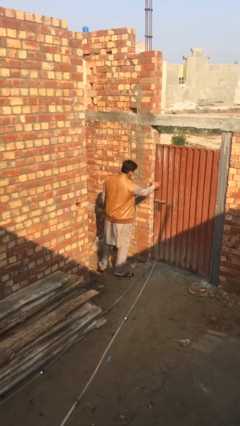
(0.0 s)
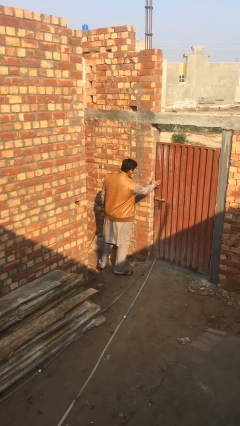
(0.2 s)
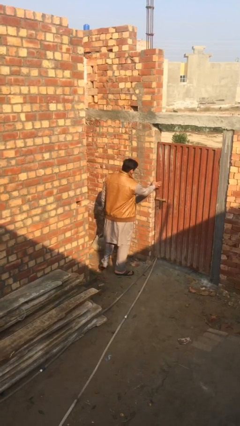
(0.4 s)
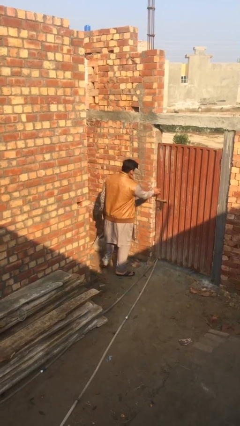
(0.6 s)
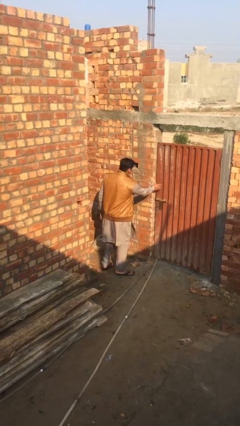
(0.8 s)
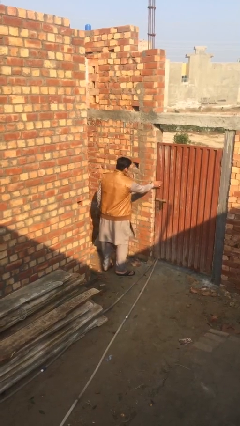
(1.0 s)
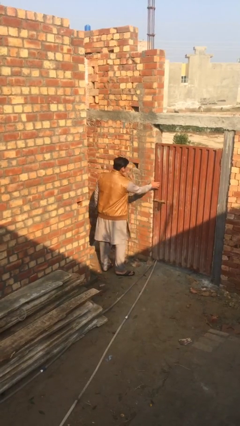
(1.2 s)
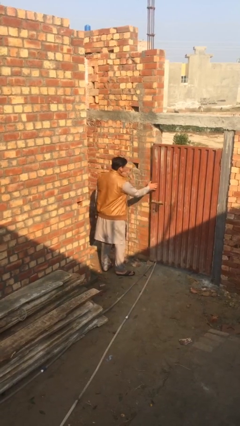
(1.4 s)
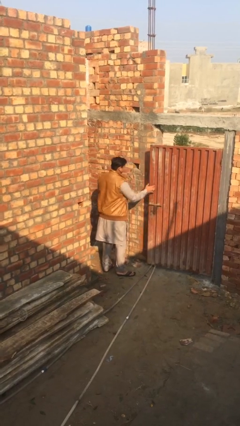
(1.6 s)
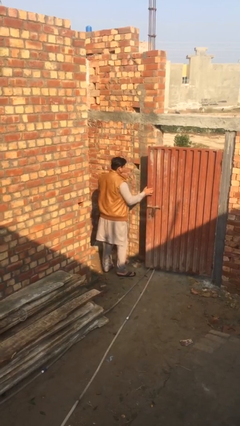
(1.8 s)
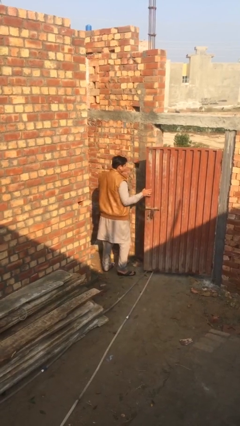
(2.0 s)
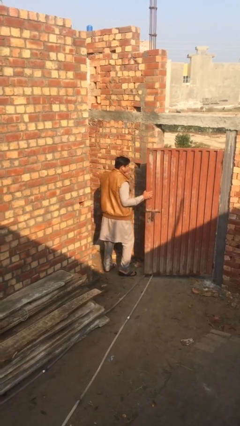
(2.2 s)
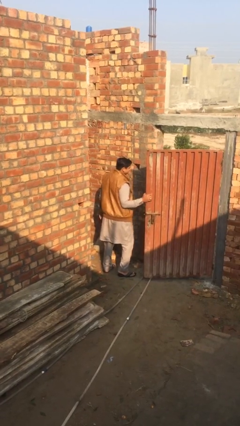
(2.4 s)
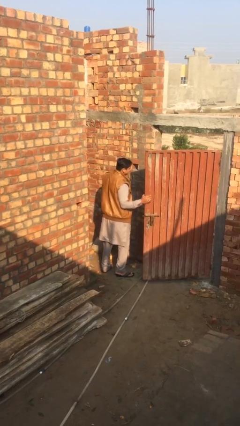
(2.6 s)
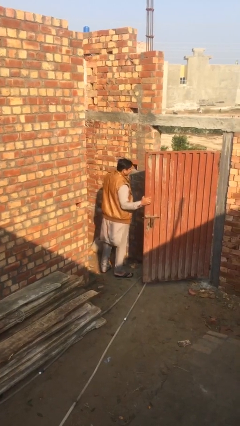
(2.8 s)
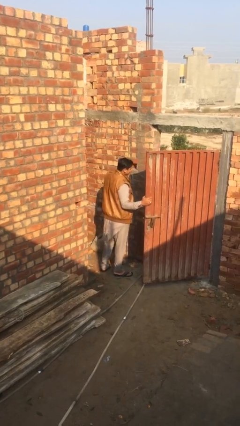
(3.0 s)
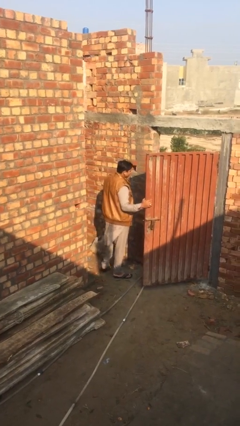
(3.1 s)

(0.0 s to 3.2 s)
person opens facility door

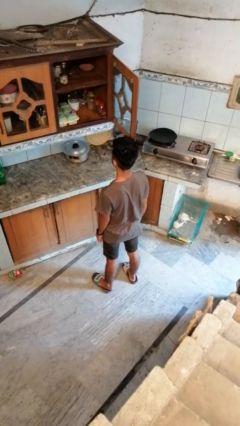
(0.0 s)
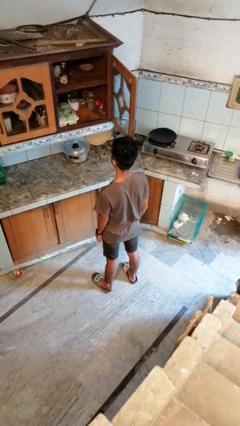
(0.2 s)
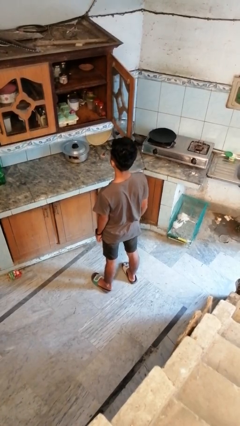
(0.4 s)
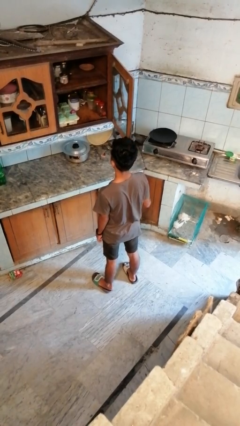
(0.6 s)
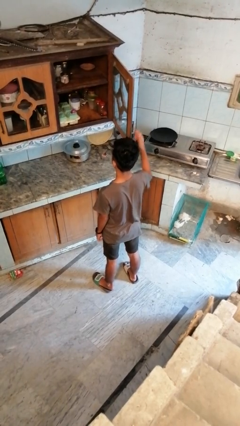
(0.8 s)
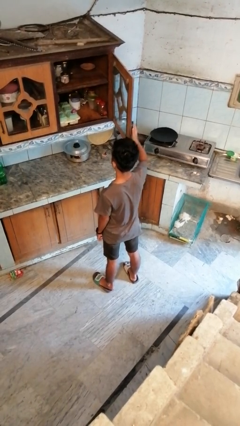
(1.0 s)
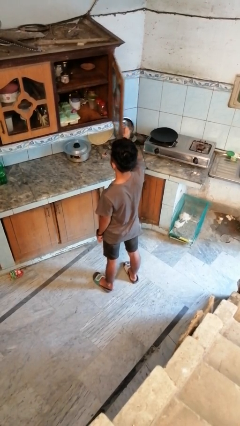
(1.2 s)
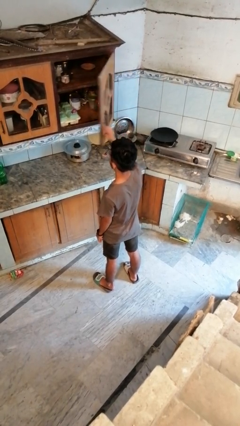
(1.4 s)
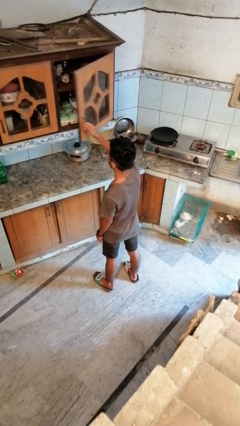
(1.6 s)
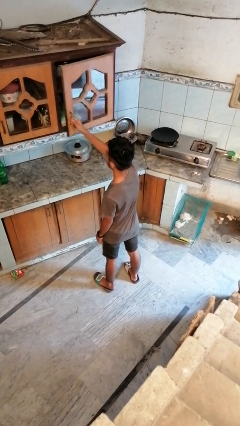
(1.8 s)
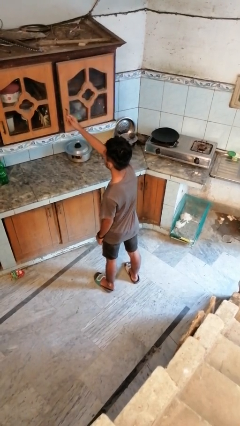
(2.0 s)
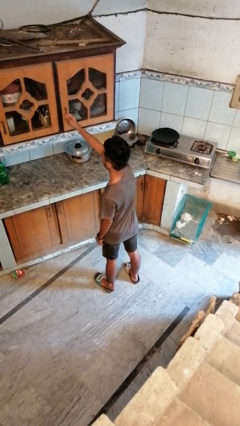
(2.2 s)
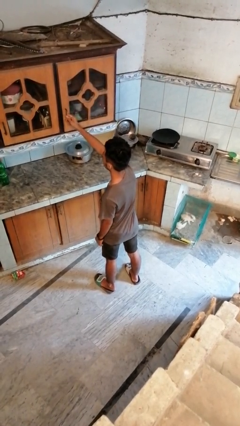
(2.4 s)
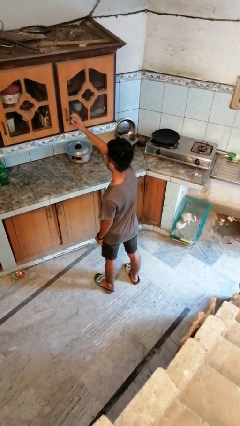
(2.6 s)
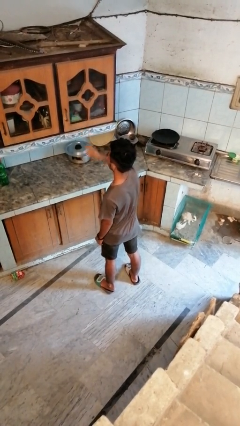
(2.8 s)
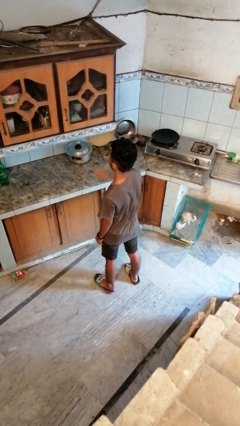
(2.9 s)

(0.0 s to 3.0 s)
person closes cabinet

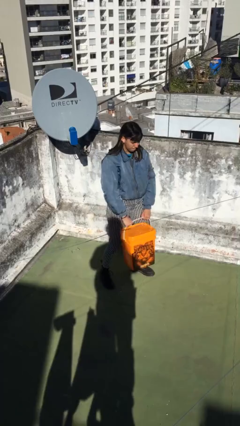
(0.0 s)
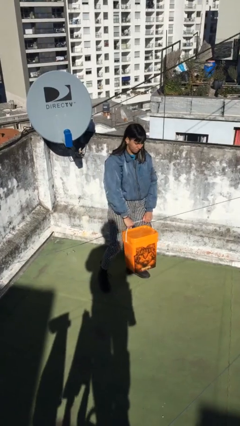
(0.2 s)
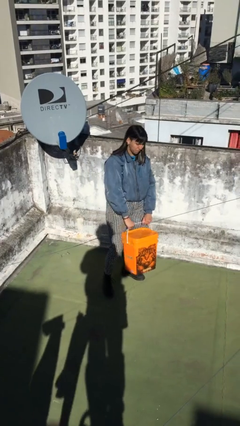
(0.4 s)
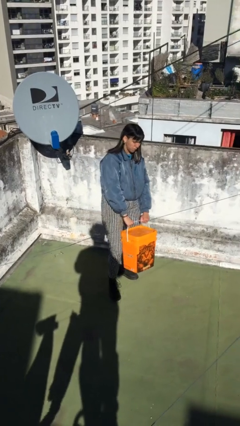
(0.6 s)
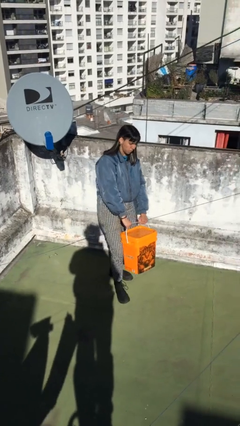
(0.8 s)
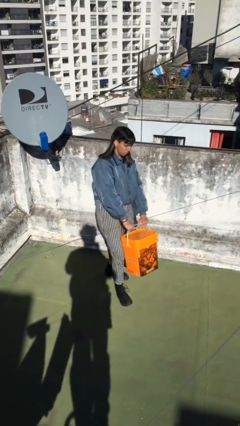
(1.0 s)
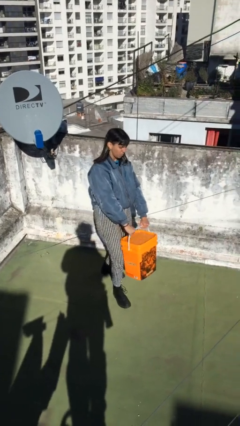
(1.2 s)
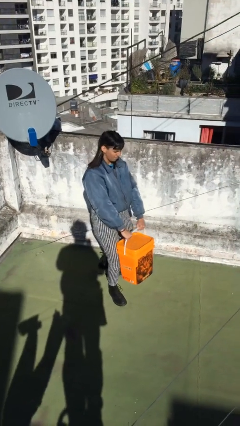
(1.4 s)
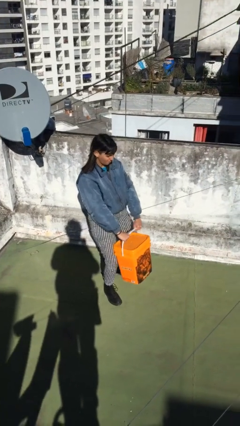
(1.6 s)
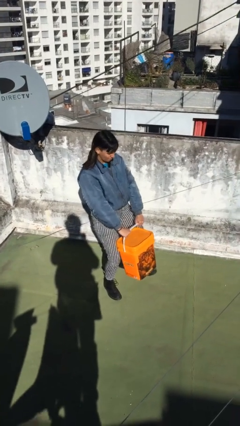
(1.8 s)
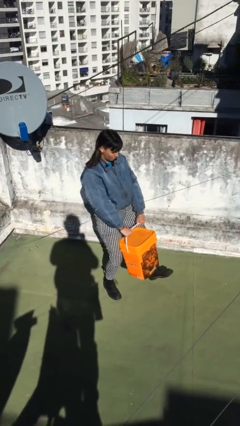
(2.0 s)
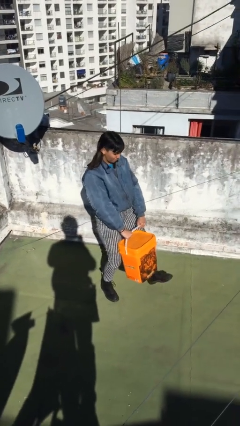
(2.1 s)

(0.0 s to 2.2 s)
person carries heavy object

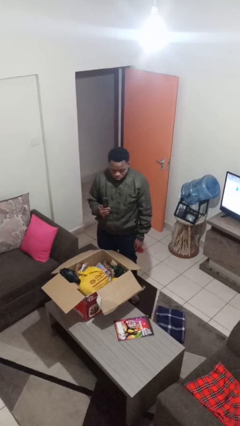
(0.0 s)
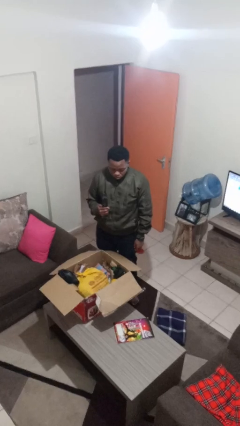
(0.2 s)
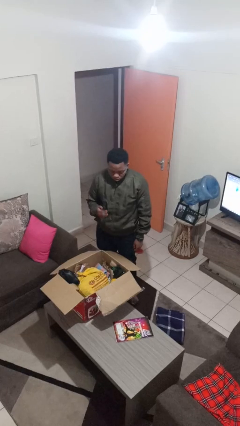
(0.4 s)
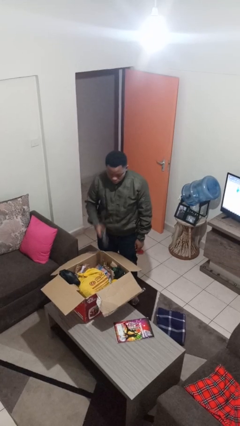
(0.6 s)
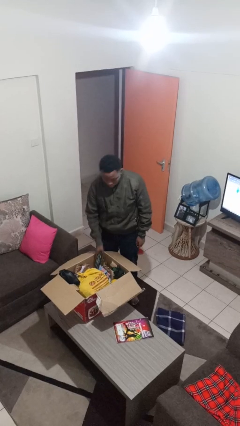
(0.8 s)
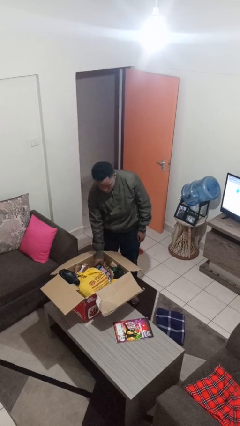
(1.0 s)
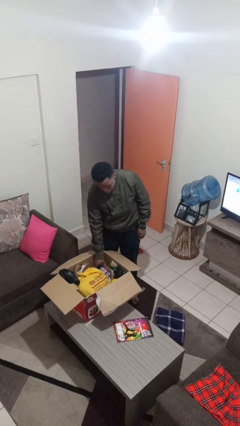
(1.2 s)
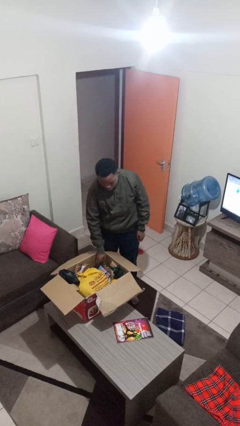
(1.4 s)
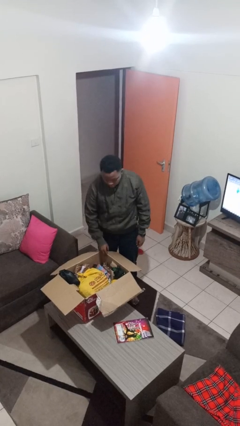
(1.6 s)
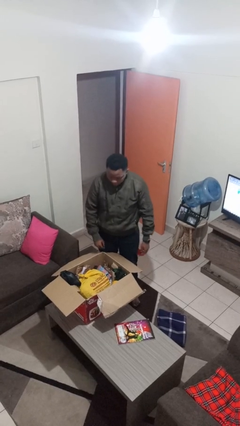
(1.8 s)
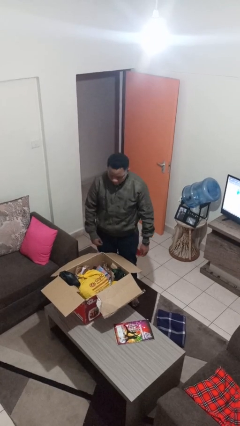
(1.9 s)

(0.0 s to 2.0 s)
person puts object into box

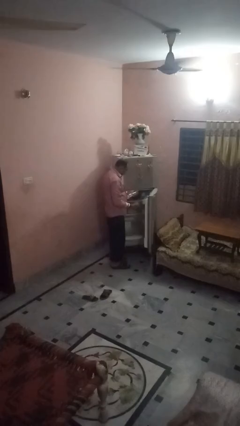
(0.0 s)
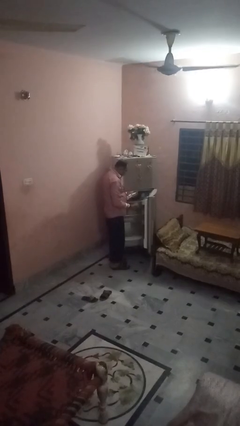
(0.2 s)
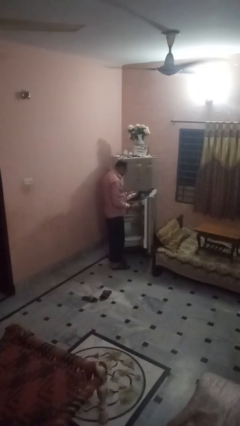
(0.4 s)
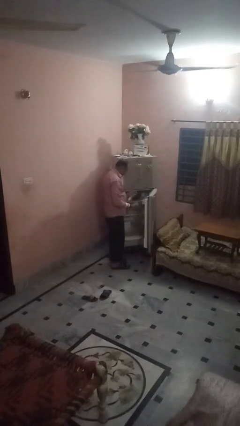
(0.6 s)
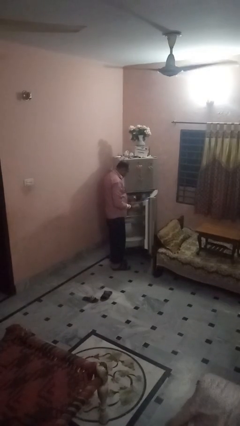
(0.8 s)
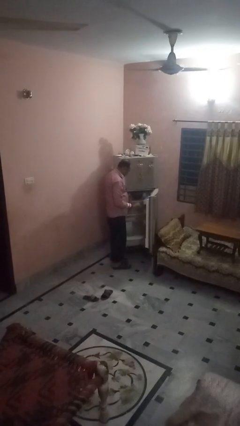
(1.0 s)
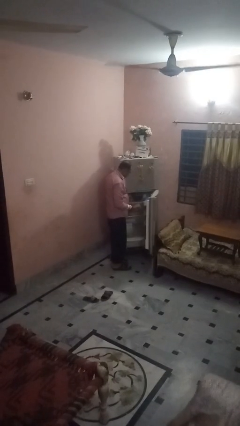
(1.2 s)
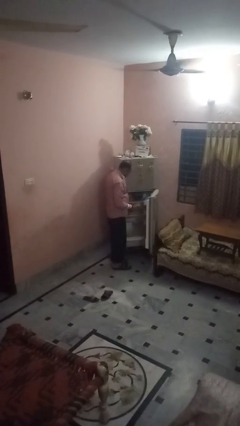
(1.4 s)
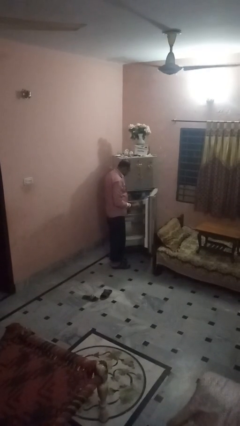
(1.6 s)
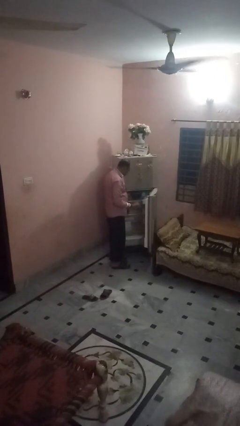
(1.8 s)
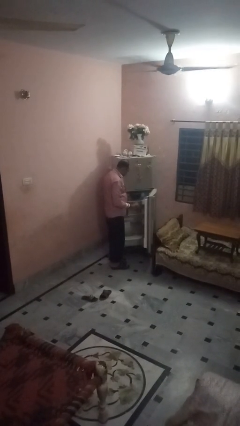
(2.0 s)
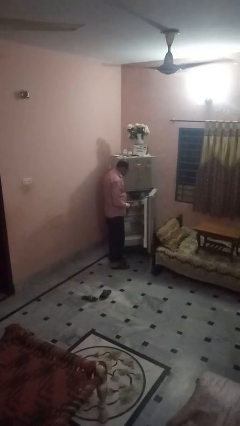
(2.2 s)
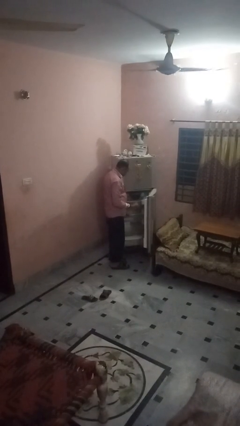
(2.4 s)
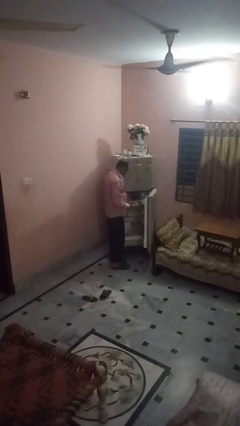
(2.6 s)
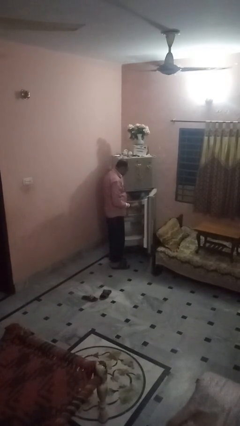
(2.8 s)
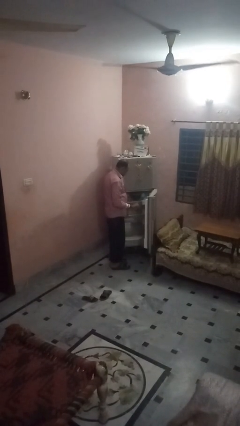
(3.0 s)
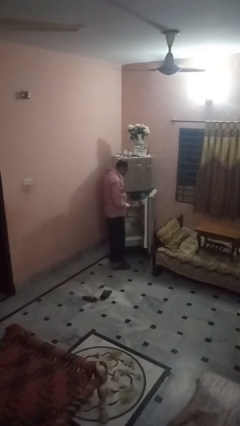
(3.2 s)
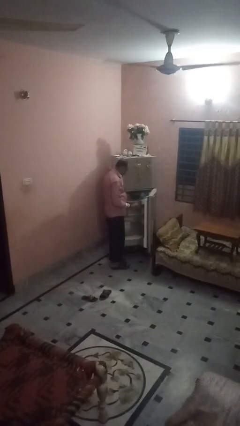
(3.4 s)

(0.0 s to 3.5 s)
person takes object from refrigerator

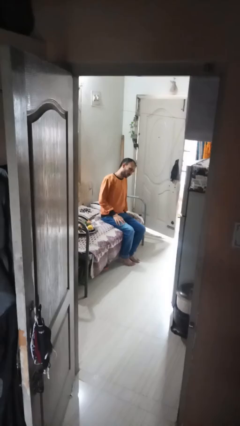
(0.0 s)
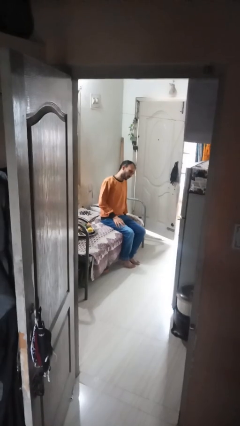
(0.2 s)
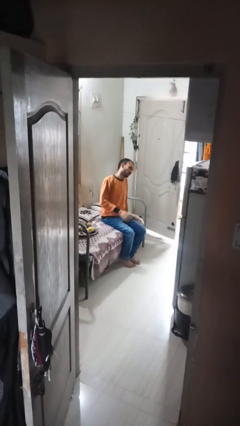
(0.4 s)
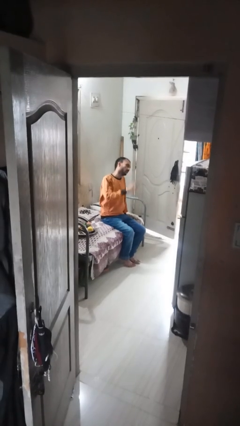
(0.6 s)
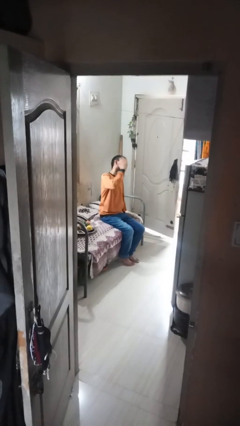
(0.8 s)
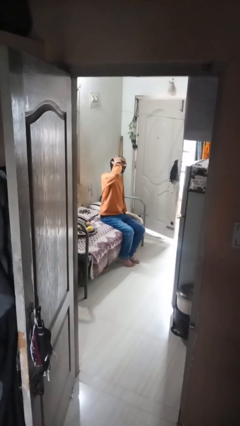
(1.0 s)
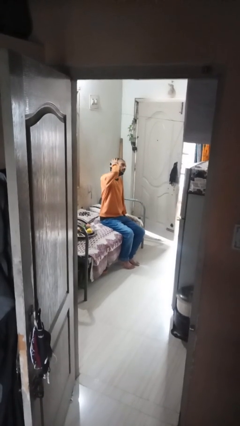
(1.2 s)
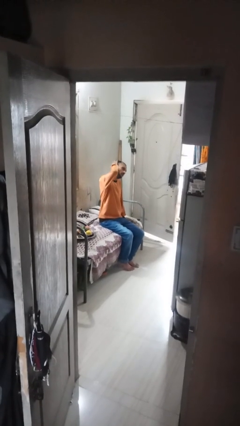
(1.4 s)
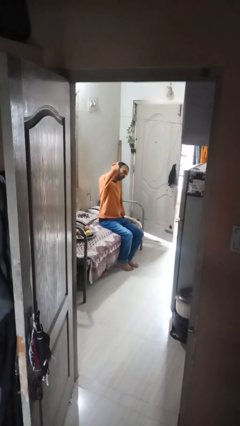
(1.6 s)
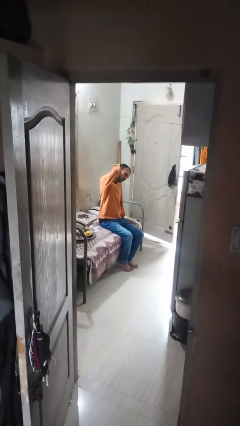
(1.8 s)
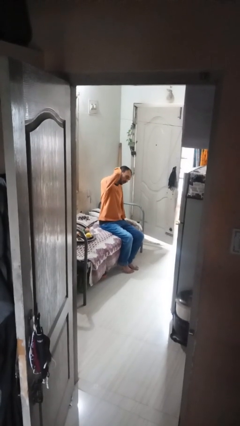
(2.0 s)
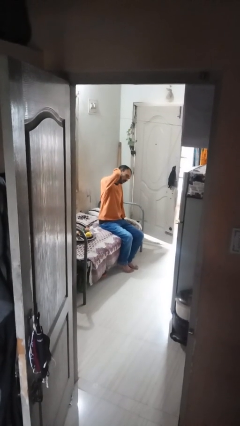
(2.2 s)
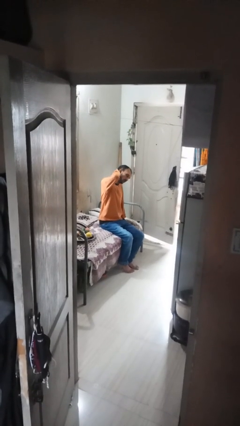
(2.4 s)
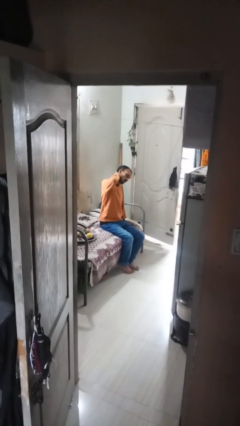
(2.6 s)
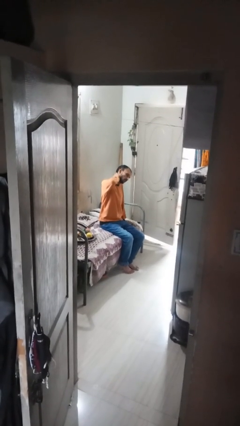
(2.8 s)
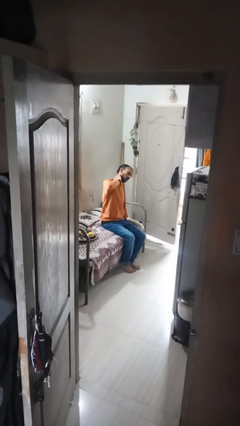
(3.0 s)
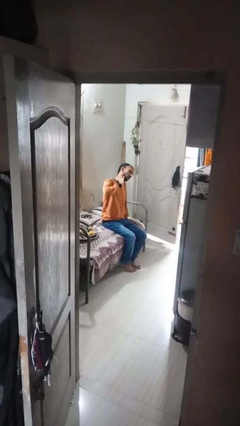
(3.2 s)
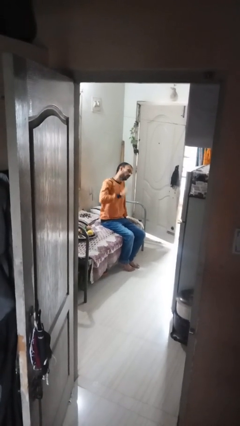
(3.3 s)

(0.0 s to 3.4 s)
person strokes hair

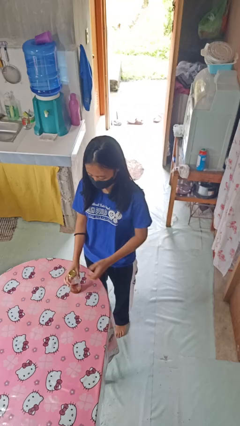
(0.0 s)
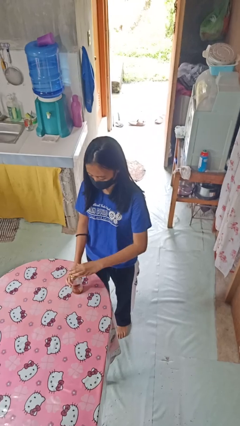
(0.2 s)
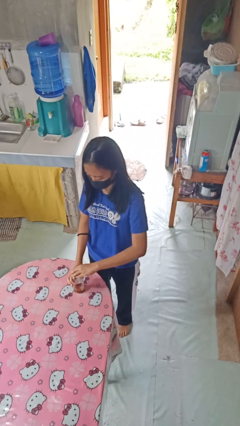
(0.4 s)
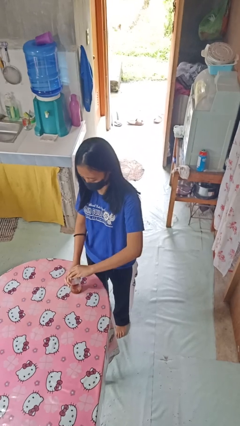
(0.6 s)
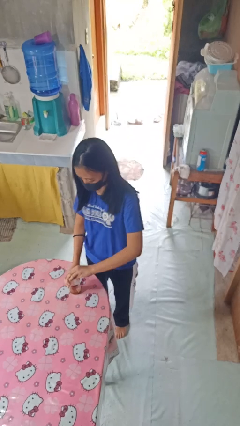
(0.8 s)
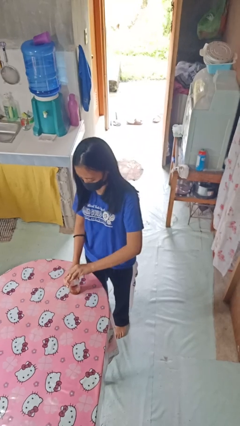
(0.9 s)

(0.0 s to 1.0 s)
person opens jar
